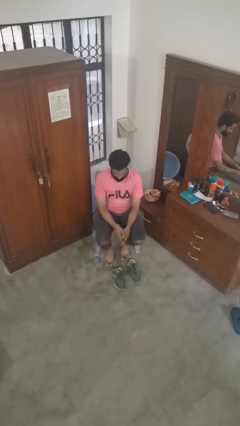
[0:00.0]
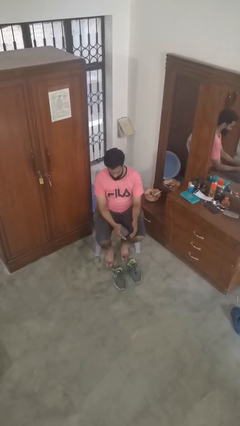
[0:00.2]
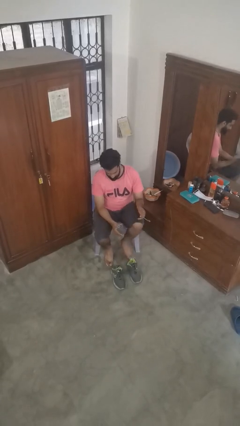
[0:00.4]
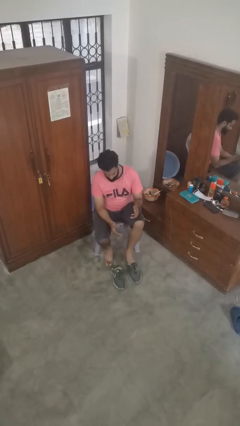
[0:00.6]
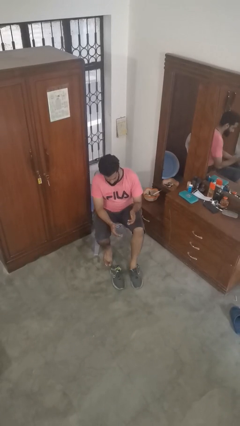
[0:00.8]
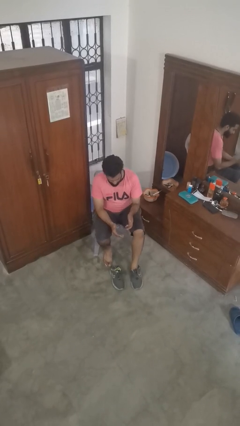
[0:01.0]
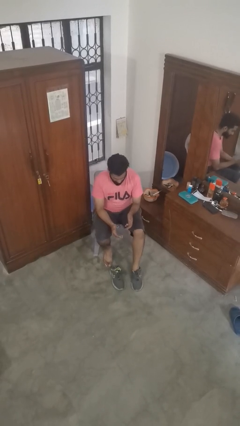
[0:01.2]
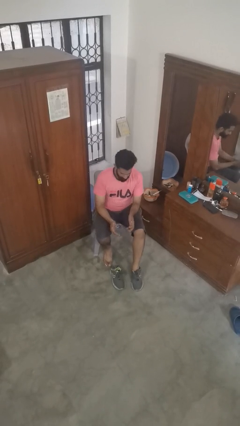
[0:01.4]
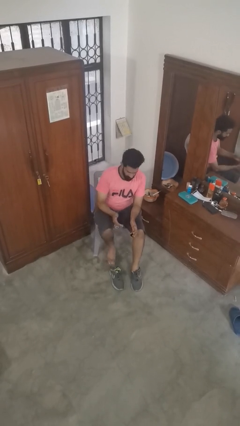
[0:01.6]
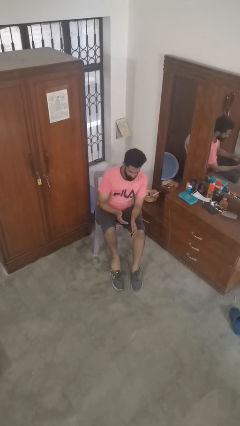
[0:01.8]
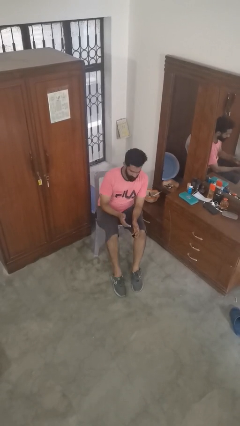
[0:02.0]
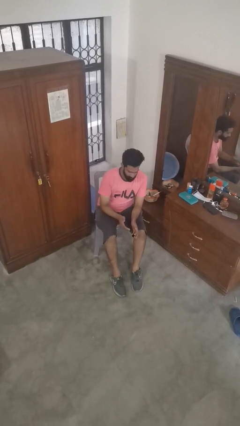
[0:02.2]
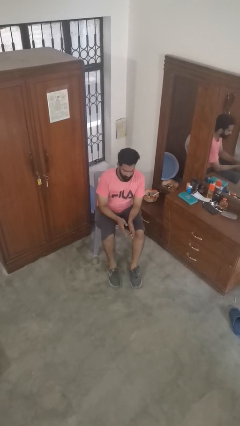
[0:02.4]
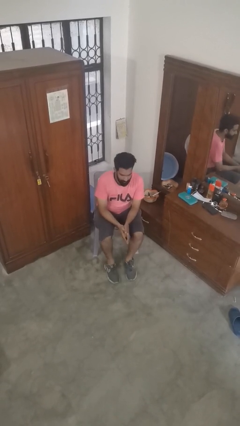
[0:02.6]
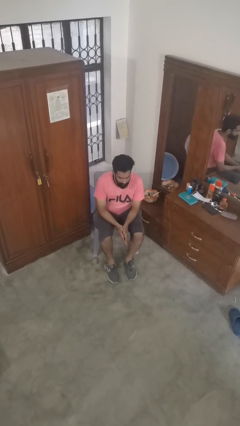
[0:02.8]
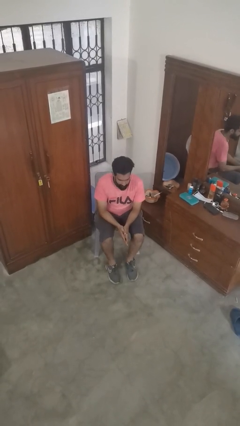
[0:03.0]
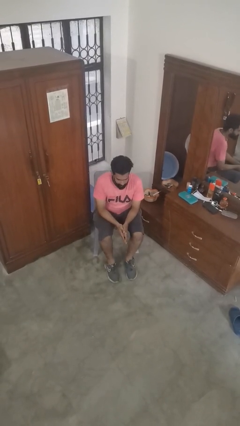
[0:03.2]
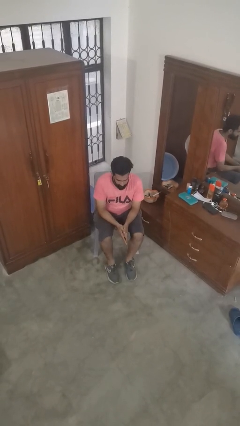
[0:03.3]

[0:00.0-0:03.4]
person puts on shoes

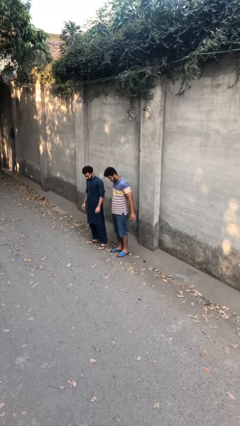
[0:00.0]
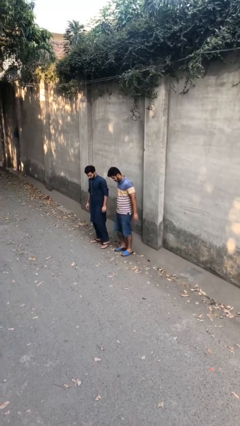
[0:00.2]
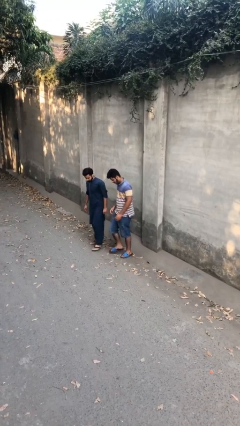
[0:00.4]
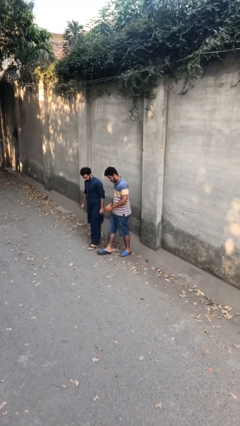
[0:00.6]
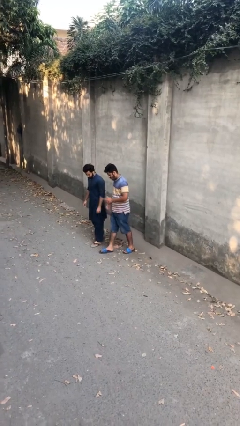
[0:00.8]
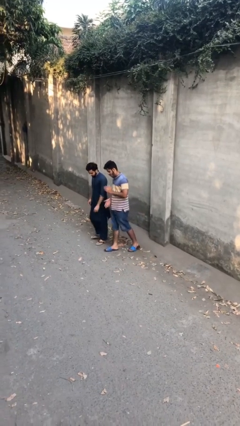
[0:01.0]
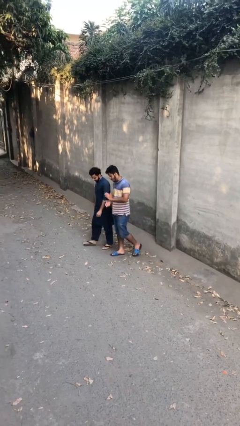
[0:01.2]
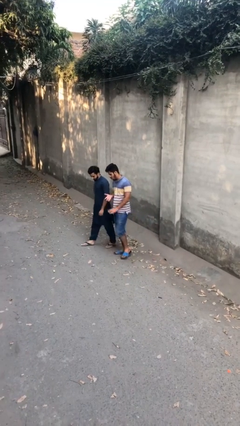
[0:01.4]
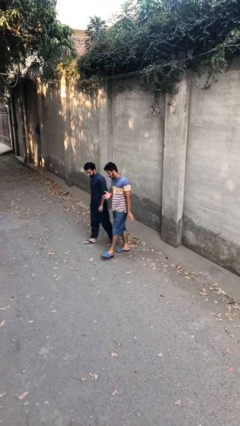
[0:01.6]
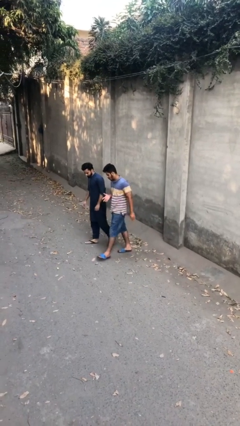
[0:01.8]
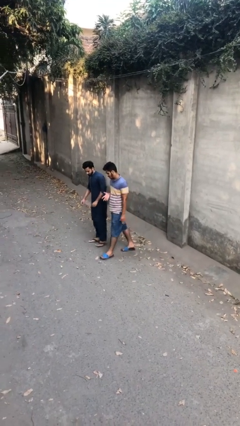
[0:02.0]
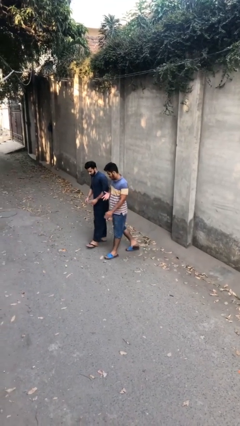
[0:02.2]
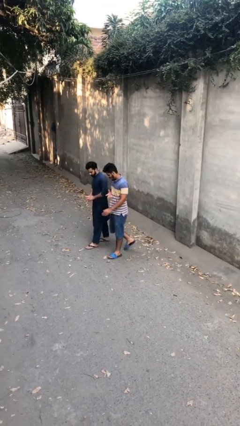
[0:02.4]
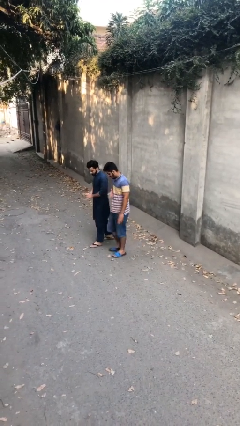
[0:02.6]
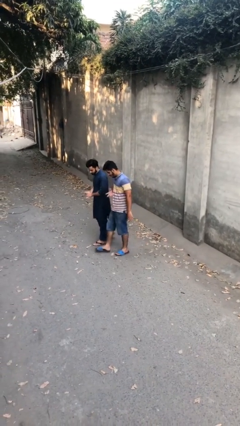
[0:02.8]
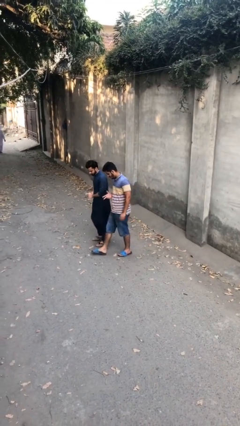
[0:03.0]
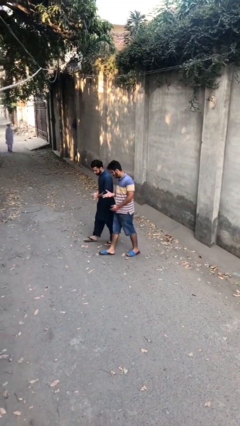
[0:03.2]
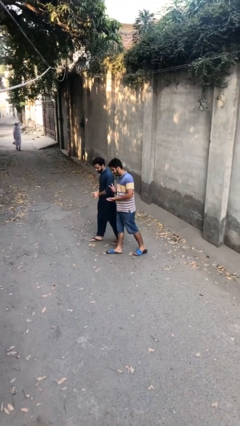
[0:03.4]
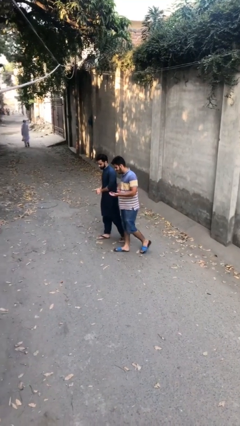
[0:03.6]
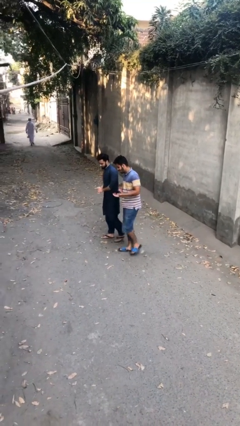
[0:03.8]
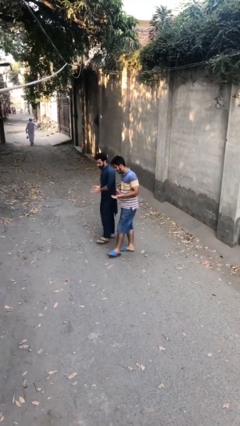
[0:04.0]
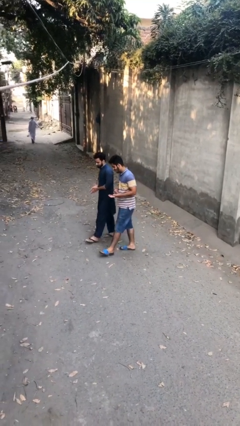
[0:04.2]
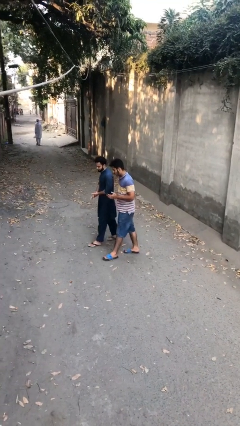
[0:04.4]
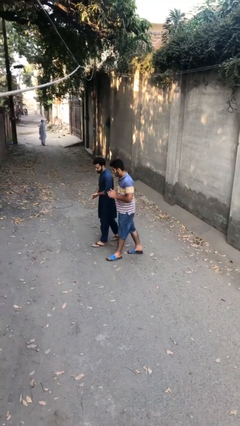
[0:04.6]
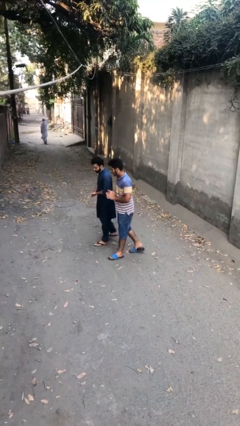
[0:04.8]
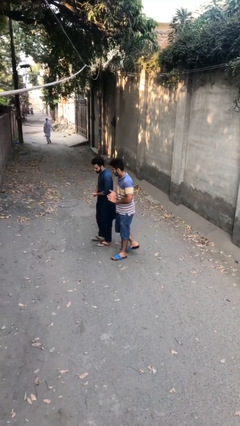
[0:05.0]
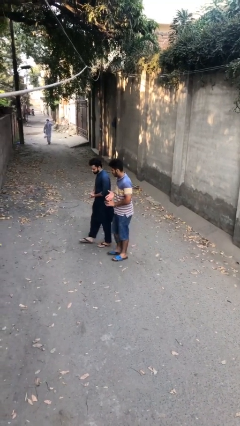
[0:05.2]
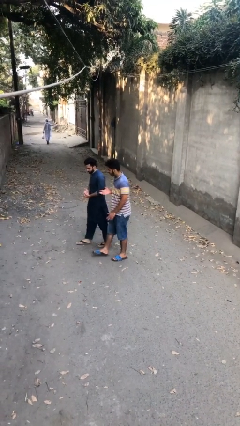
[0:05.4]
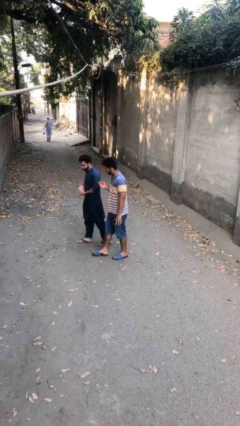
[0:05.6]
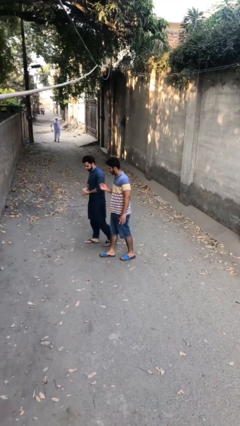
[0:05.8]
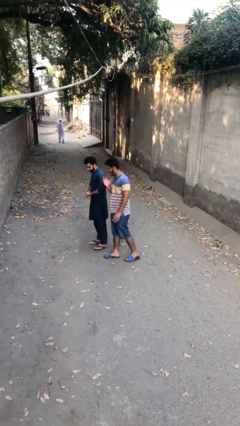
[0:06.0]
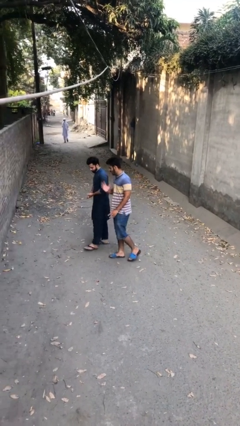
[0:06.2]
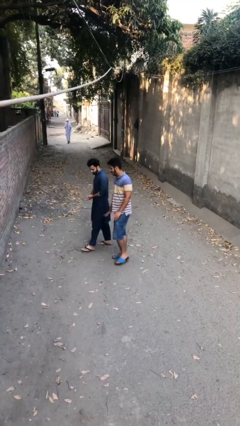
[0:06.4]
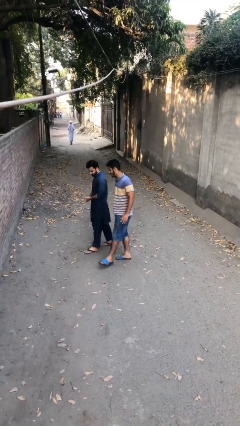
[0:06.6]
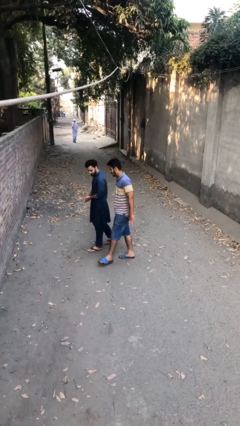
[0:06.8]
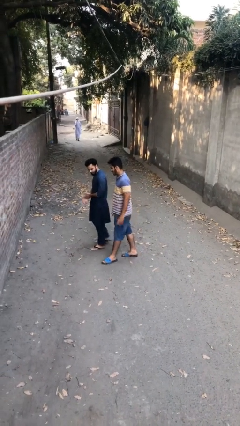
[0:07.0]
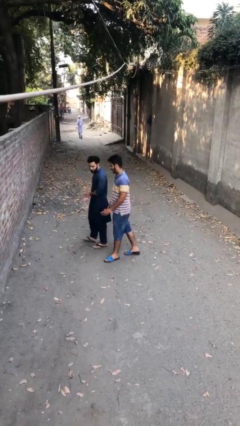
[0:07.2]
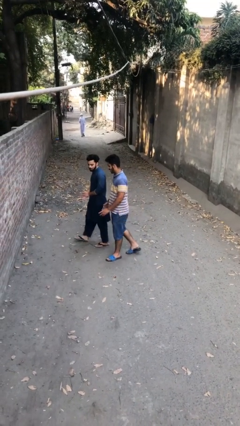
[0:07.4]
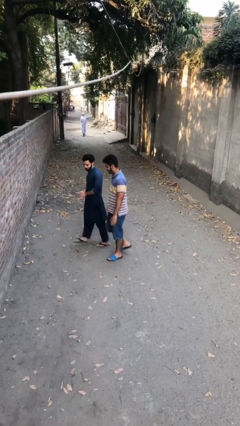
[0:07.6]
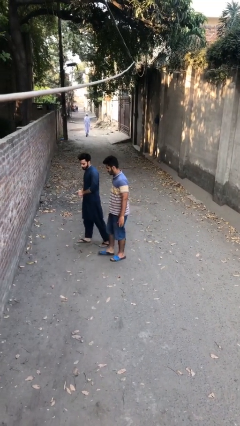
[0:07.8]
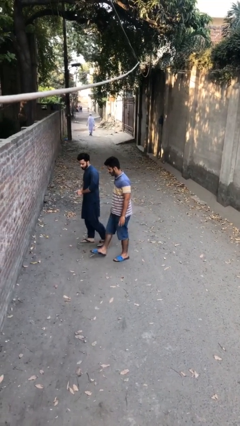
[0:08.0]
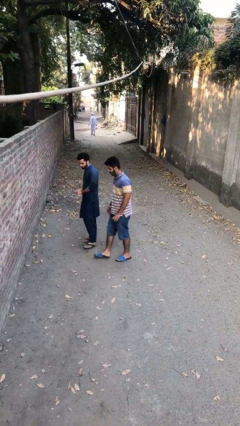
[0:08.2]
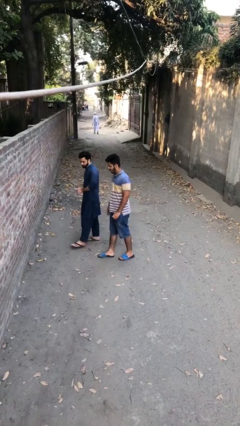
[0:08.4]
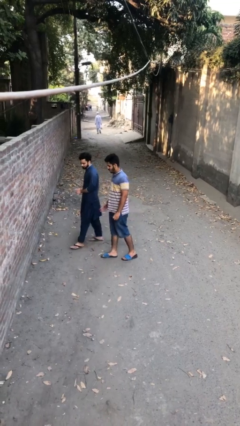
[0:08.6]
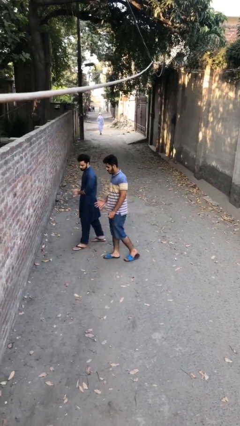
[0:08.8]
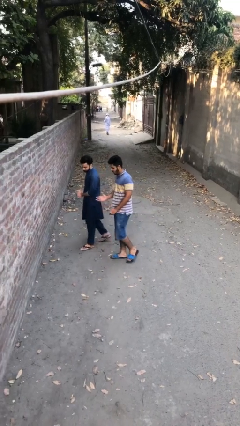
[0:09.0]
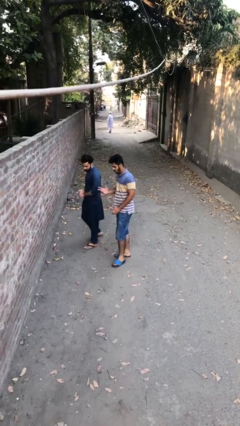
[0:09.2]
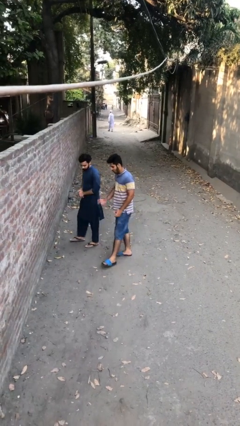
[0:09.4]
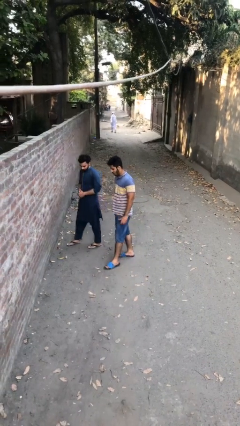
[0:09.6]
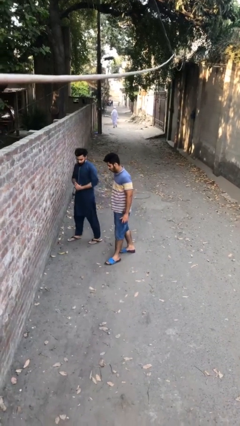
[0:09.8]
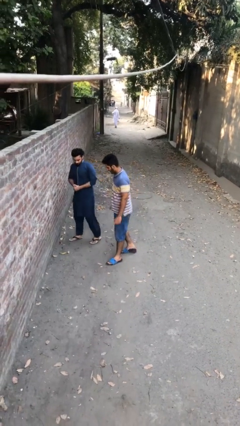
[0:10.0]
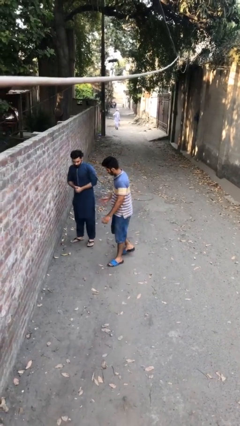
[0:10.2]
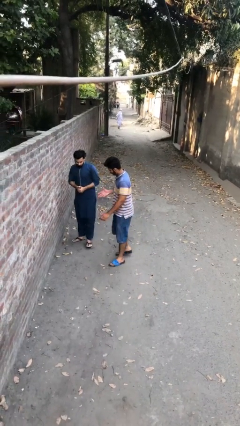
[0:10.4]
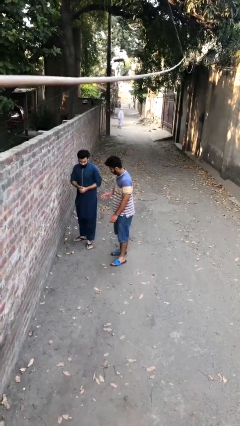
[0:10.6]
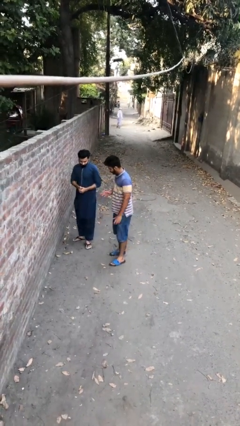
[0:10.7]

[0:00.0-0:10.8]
person talks to person

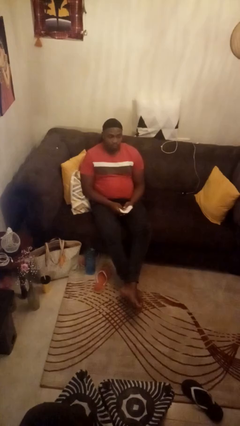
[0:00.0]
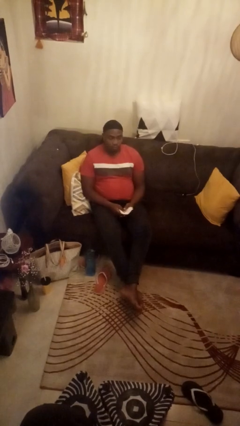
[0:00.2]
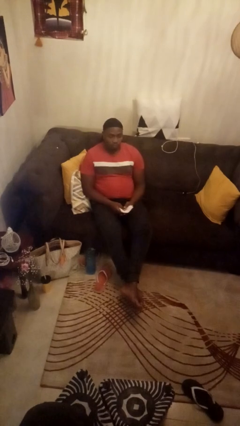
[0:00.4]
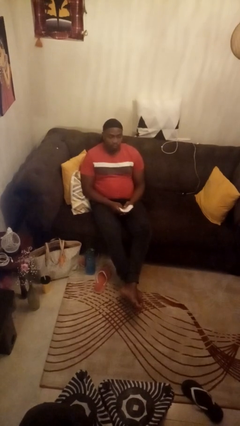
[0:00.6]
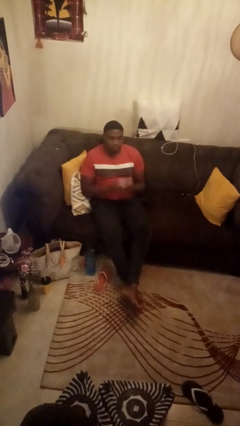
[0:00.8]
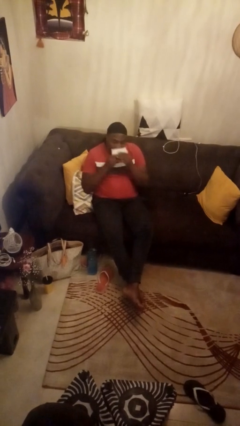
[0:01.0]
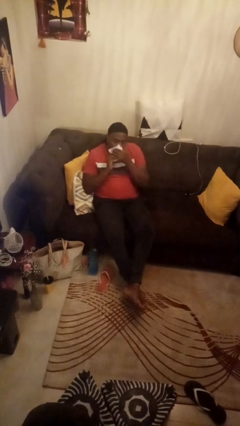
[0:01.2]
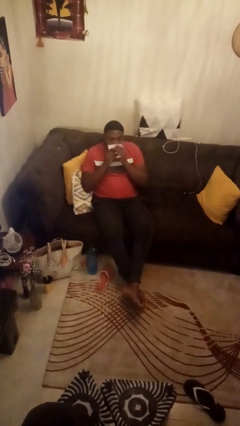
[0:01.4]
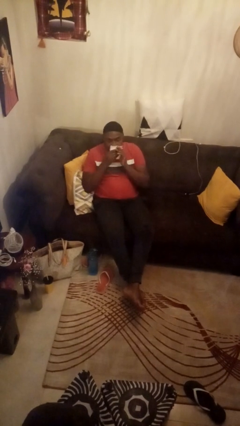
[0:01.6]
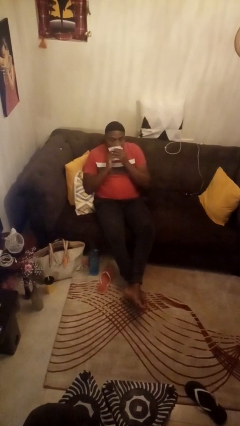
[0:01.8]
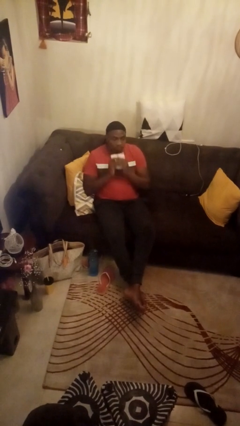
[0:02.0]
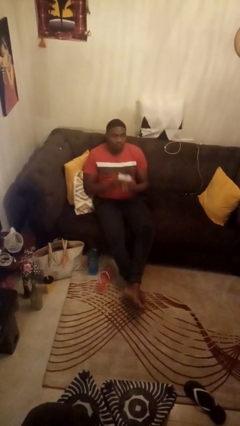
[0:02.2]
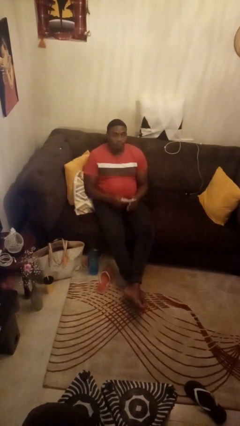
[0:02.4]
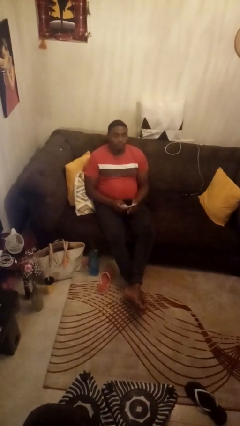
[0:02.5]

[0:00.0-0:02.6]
person wipes mouth with napkin

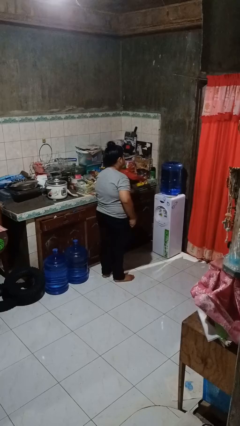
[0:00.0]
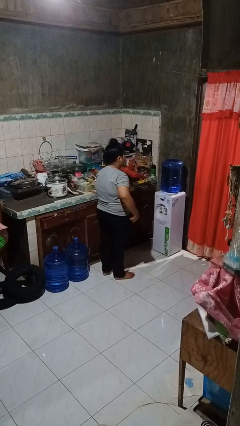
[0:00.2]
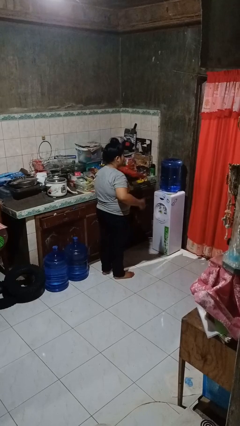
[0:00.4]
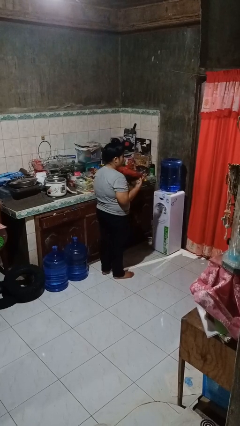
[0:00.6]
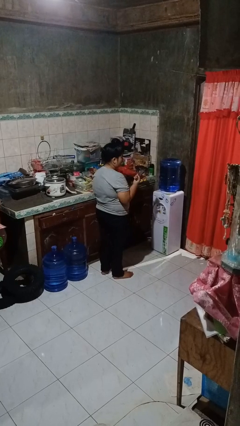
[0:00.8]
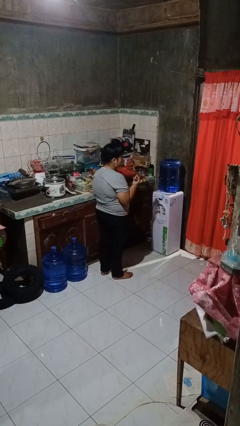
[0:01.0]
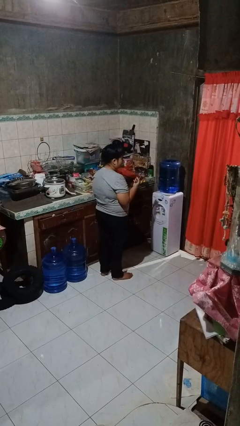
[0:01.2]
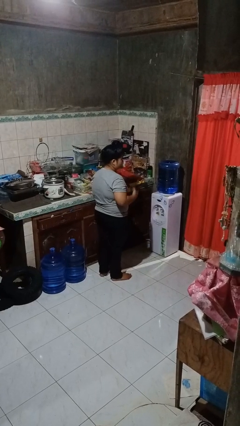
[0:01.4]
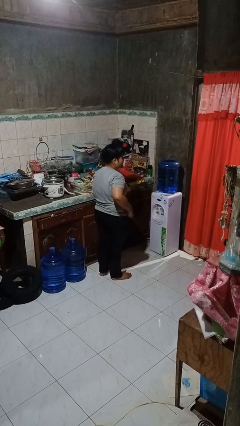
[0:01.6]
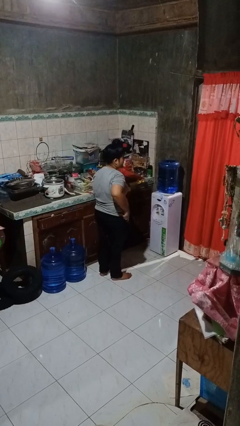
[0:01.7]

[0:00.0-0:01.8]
person takes phone from pocket
